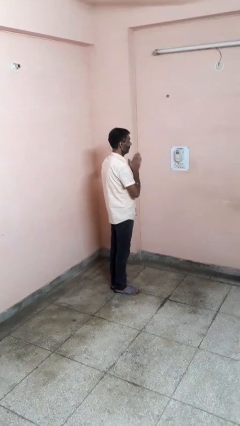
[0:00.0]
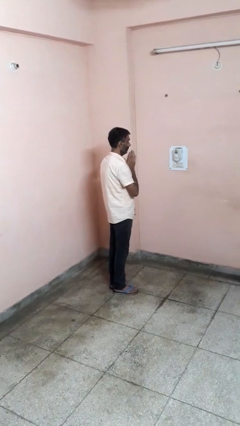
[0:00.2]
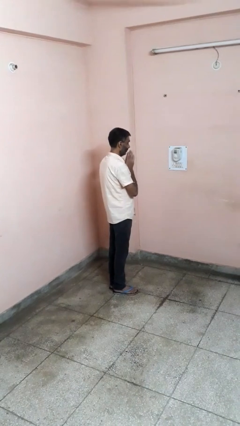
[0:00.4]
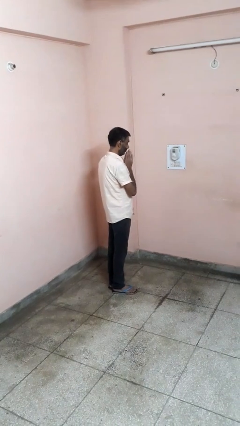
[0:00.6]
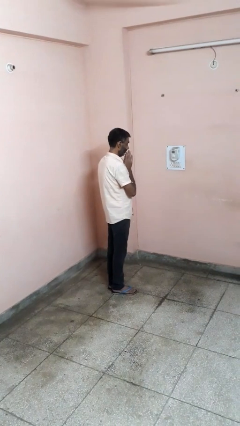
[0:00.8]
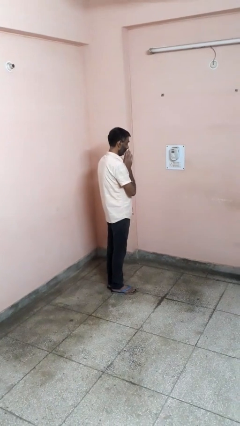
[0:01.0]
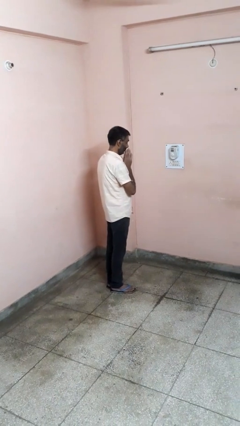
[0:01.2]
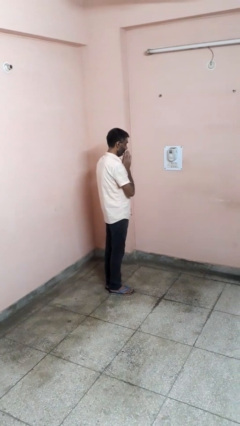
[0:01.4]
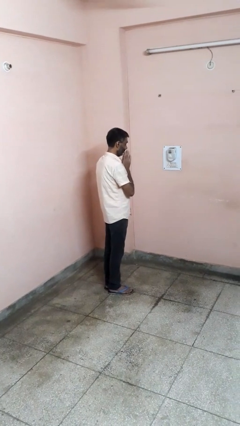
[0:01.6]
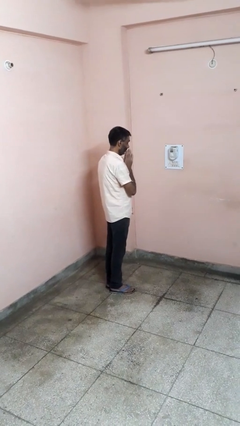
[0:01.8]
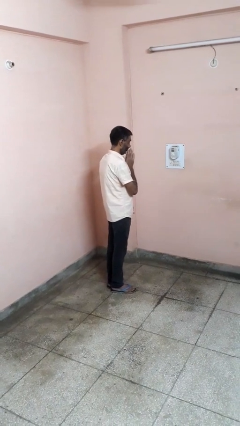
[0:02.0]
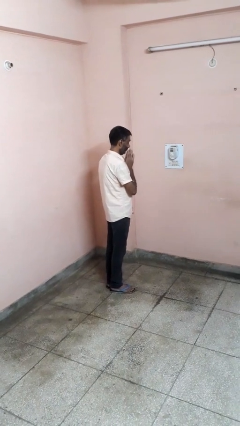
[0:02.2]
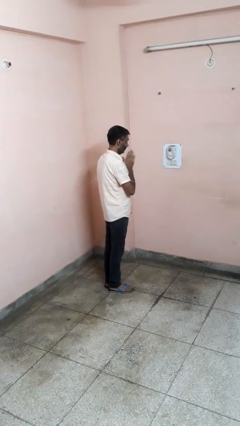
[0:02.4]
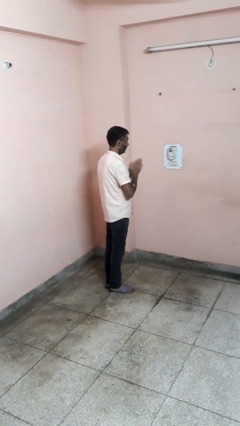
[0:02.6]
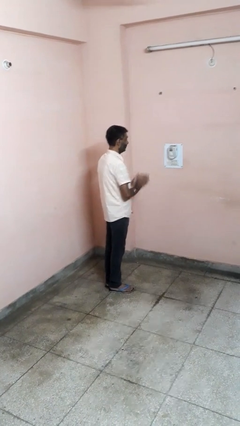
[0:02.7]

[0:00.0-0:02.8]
person prays

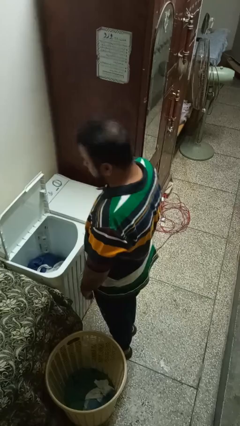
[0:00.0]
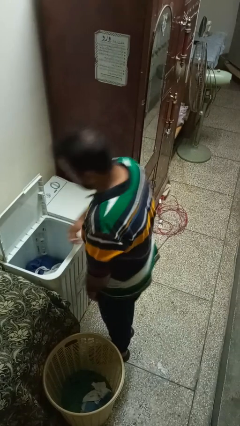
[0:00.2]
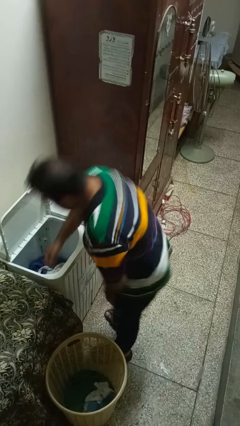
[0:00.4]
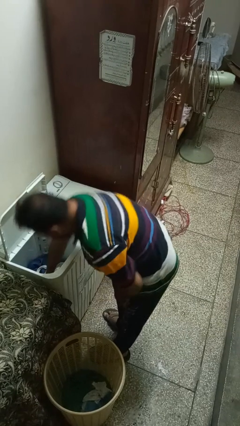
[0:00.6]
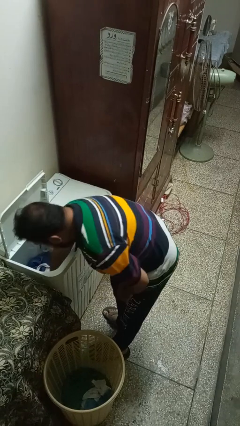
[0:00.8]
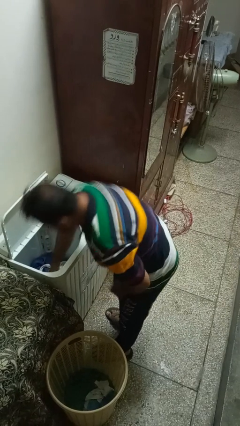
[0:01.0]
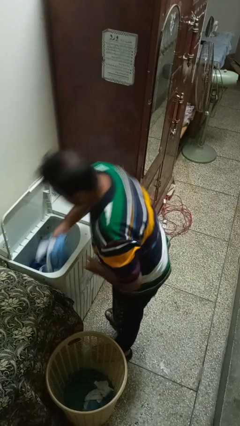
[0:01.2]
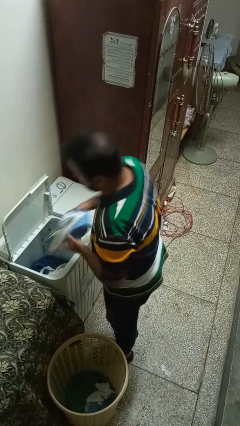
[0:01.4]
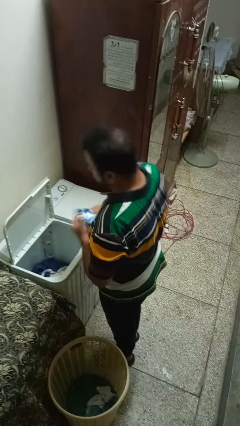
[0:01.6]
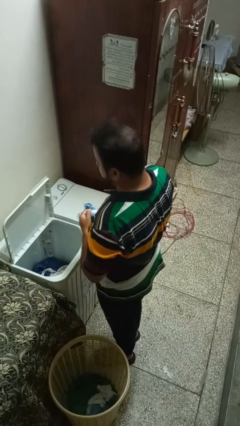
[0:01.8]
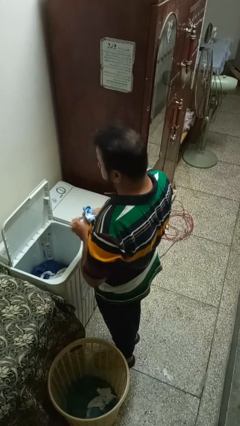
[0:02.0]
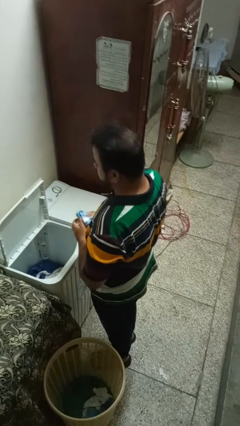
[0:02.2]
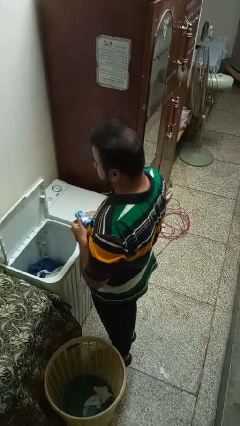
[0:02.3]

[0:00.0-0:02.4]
person unloads clotheswasher

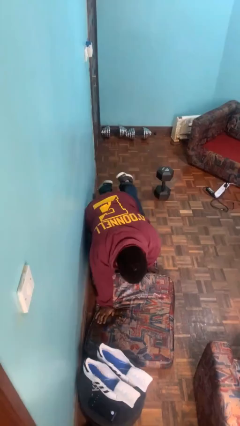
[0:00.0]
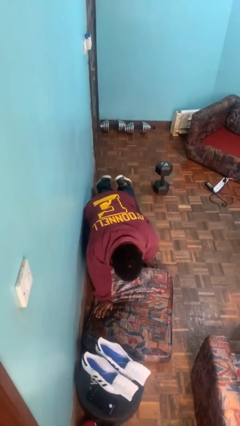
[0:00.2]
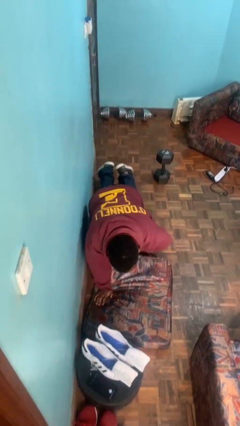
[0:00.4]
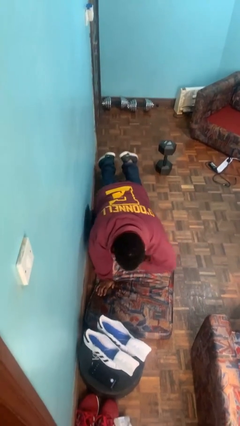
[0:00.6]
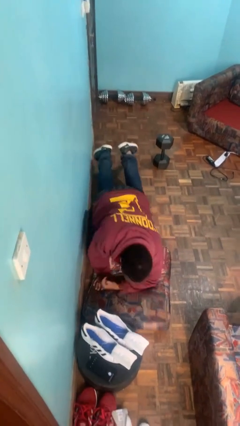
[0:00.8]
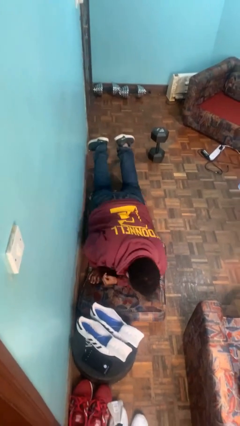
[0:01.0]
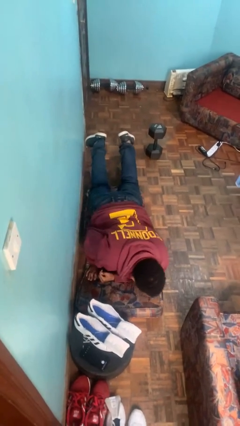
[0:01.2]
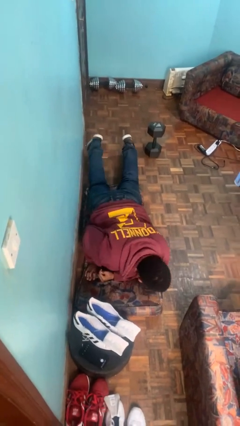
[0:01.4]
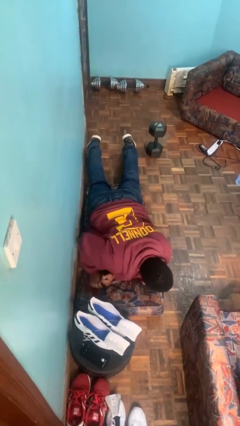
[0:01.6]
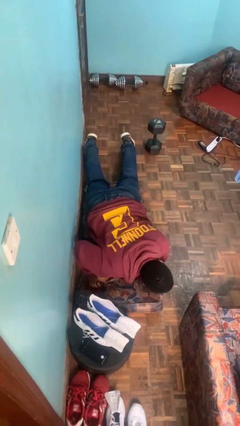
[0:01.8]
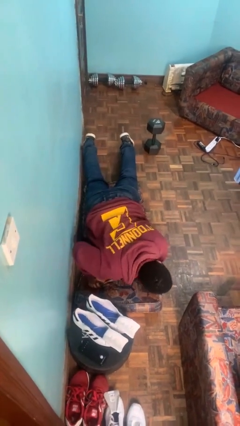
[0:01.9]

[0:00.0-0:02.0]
person lies down on floor

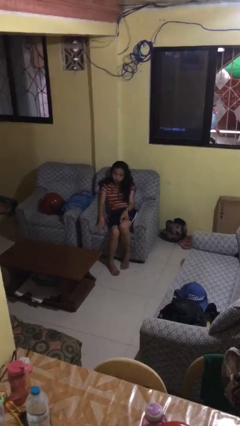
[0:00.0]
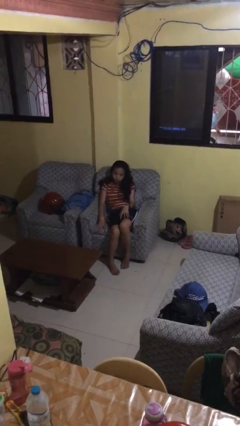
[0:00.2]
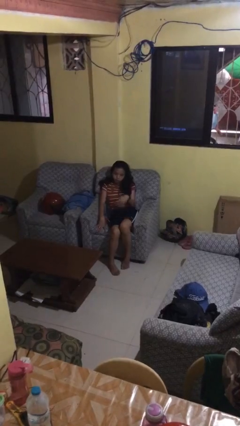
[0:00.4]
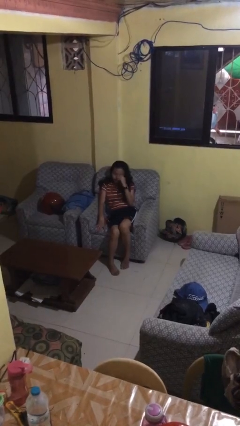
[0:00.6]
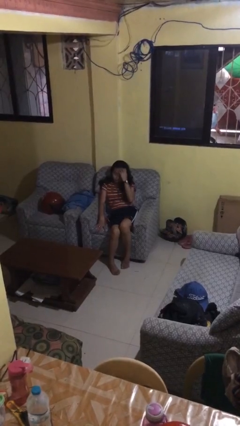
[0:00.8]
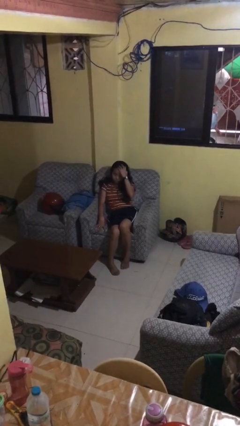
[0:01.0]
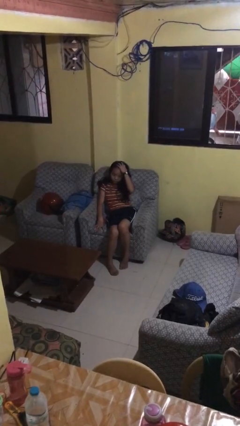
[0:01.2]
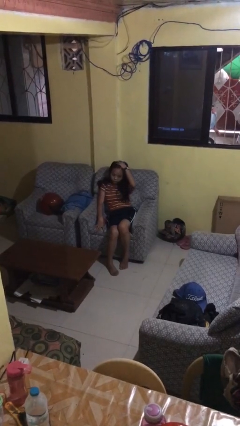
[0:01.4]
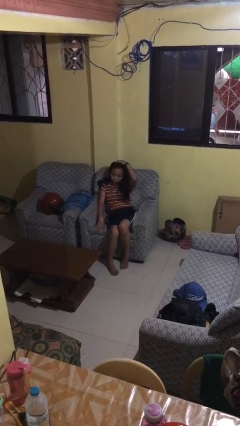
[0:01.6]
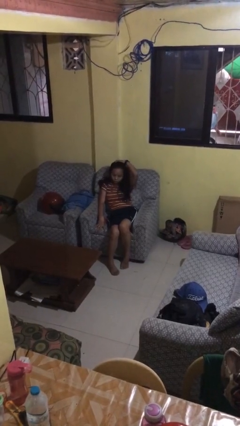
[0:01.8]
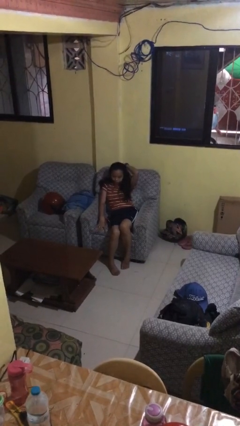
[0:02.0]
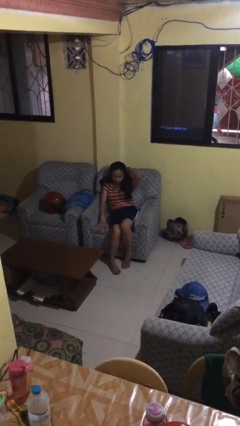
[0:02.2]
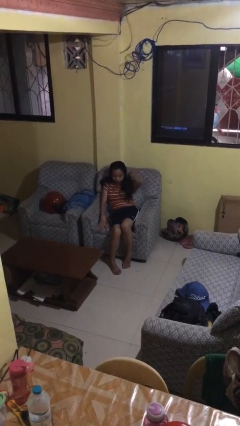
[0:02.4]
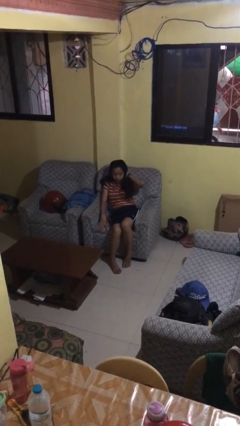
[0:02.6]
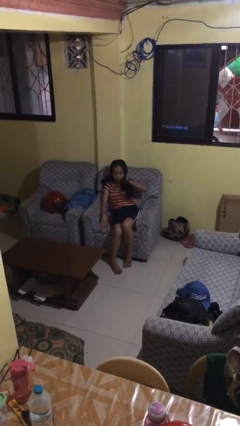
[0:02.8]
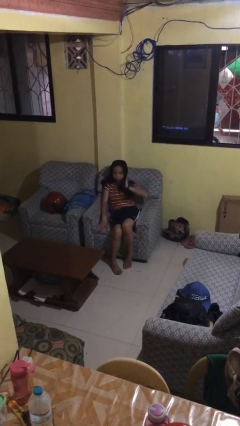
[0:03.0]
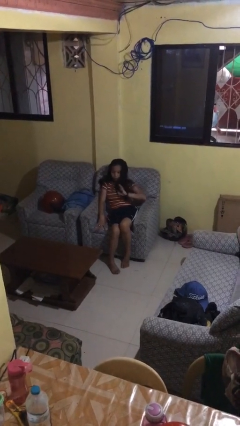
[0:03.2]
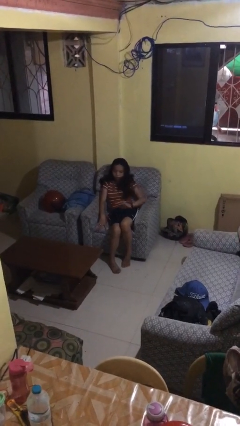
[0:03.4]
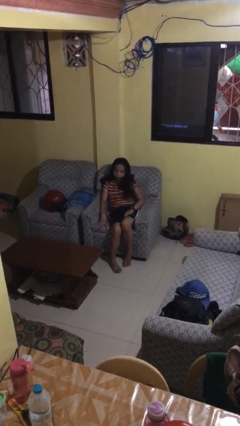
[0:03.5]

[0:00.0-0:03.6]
person strokes hair

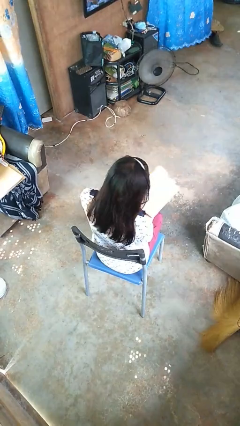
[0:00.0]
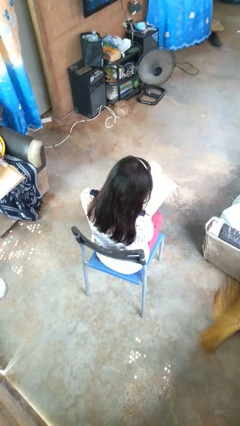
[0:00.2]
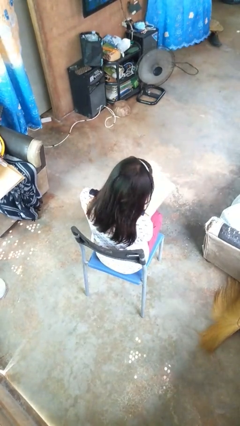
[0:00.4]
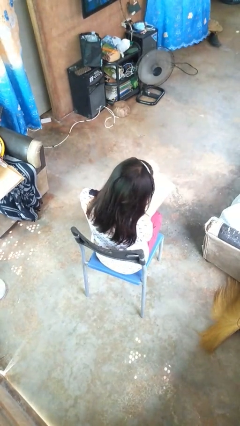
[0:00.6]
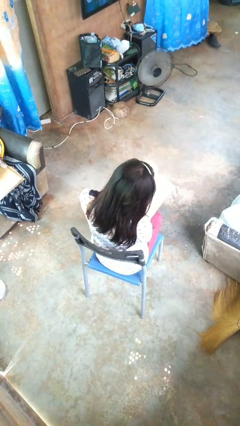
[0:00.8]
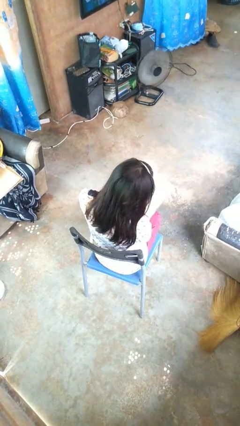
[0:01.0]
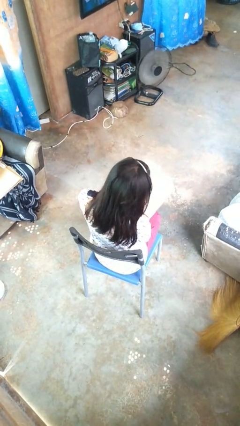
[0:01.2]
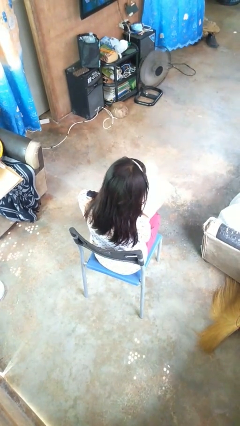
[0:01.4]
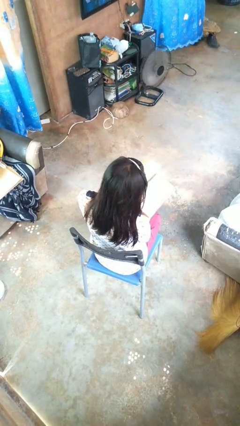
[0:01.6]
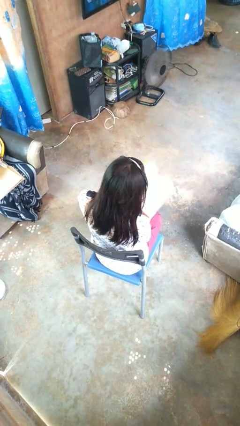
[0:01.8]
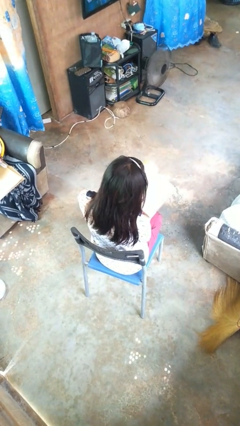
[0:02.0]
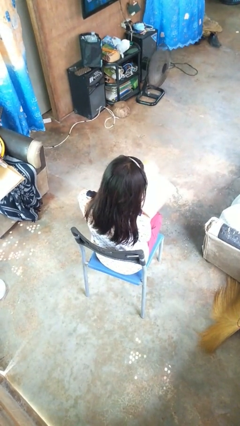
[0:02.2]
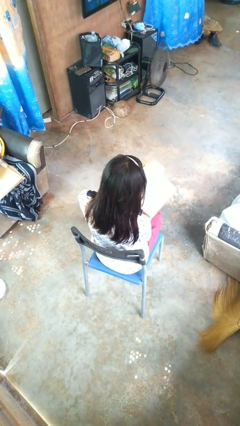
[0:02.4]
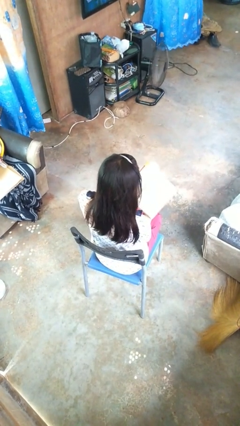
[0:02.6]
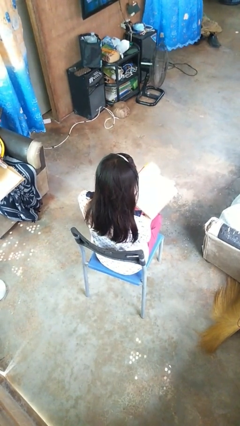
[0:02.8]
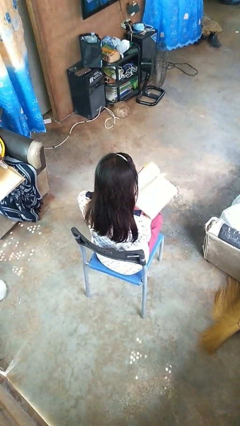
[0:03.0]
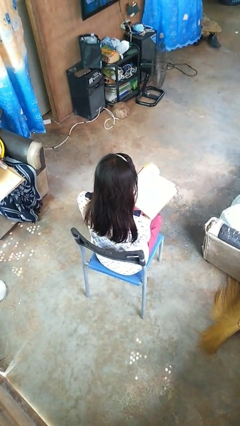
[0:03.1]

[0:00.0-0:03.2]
person reads book

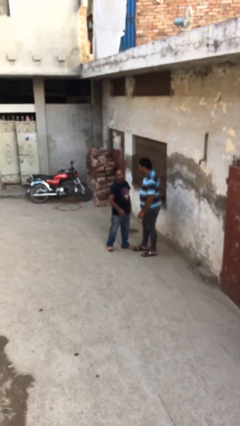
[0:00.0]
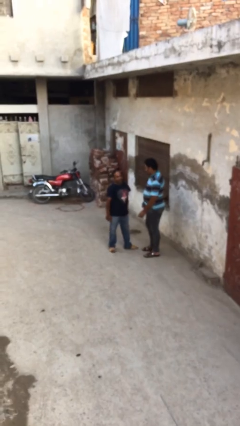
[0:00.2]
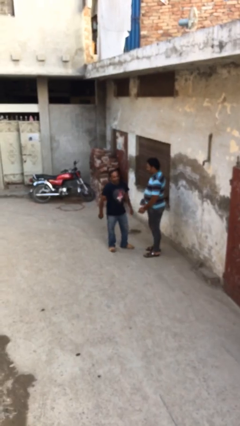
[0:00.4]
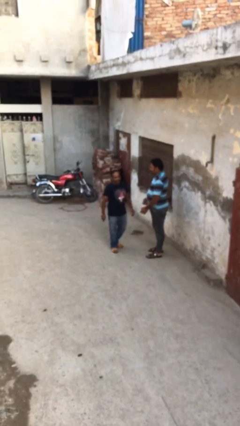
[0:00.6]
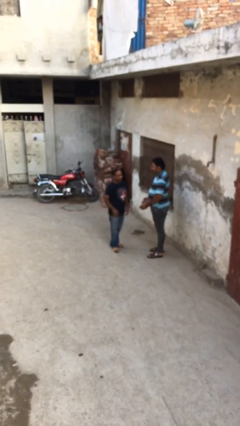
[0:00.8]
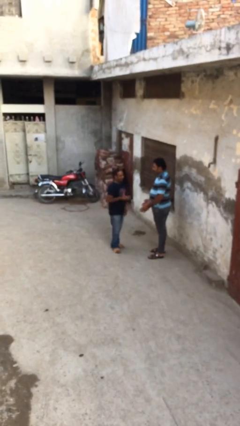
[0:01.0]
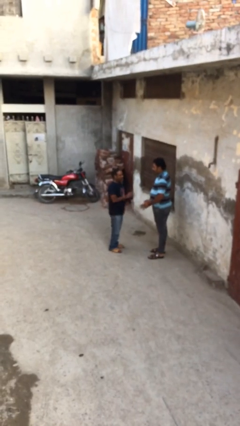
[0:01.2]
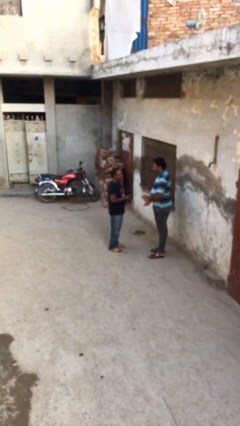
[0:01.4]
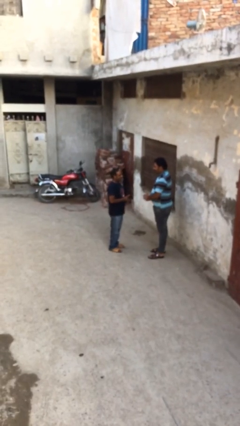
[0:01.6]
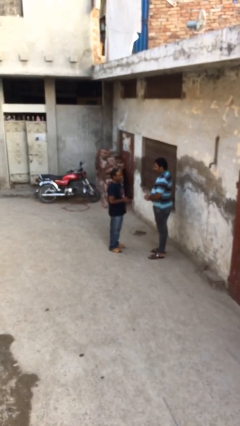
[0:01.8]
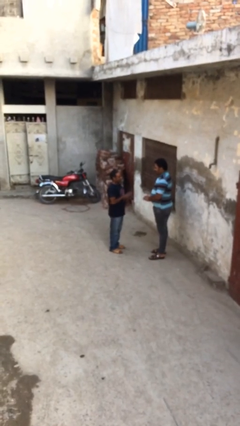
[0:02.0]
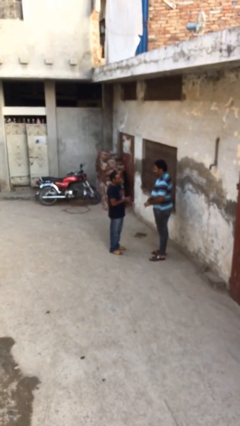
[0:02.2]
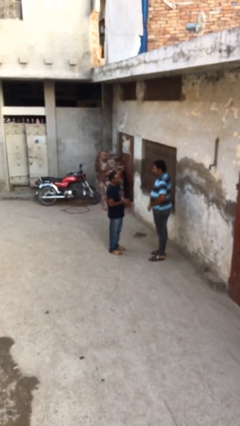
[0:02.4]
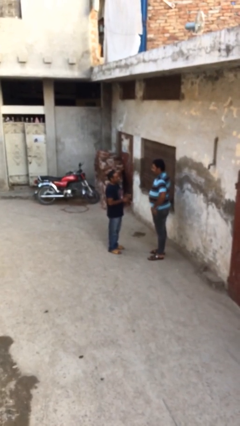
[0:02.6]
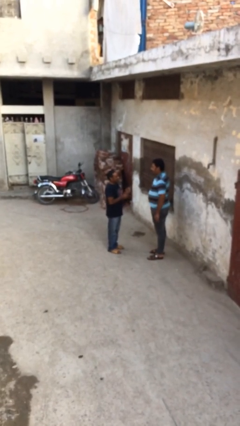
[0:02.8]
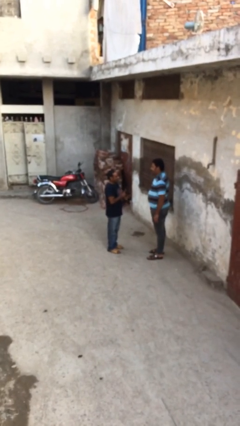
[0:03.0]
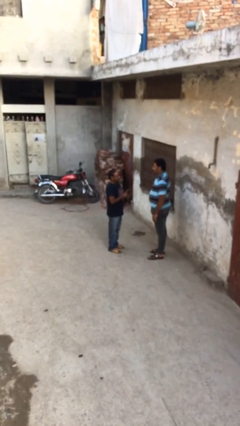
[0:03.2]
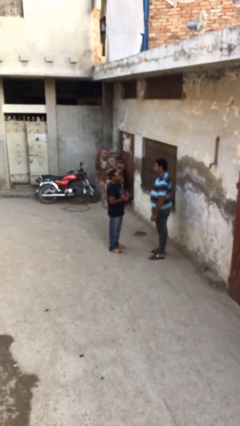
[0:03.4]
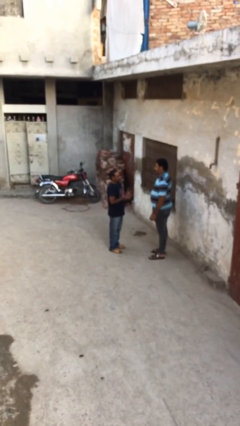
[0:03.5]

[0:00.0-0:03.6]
person talks to person
